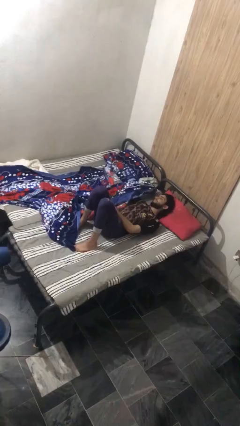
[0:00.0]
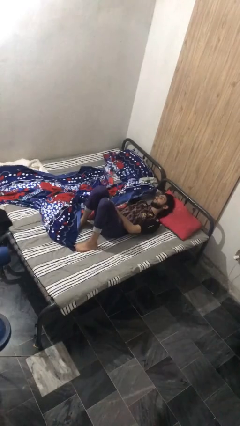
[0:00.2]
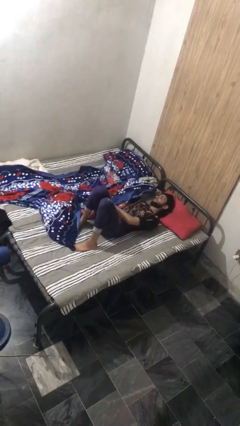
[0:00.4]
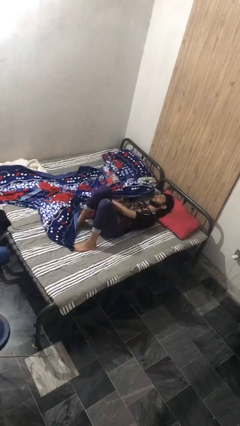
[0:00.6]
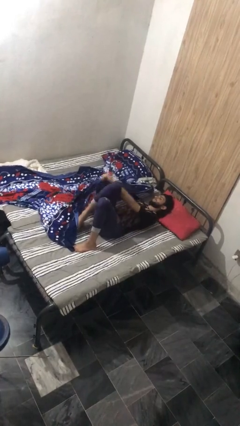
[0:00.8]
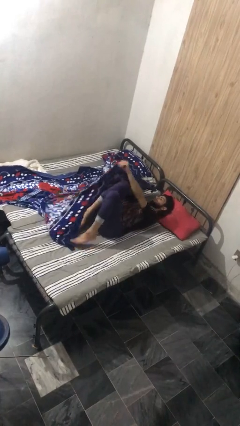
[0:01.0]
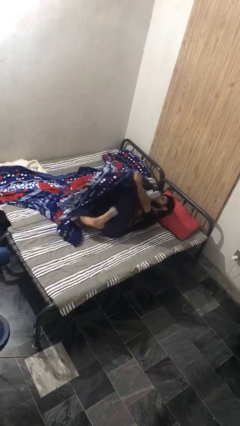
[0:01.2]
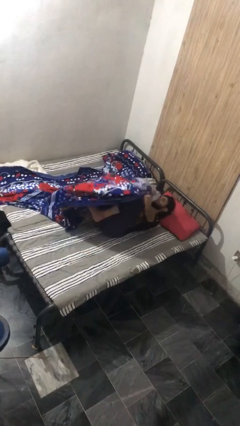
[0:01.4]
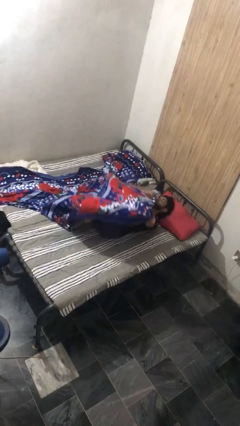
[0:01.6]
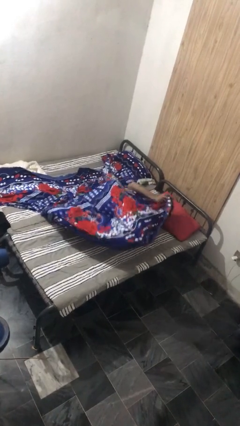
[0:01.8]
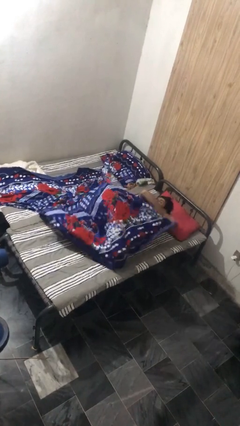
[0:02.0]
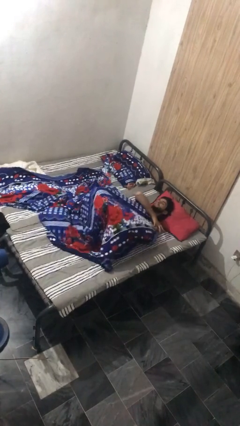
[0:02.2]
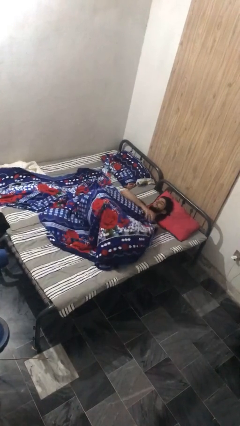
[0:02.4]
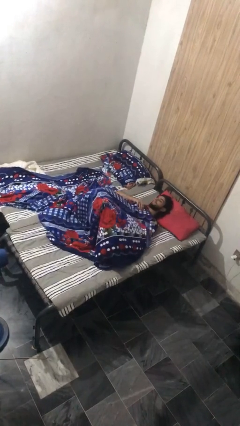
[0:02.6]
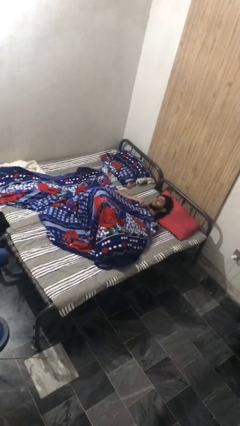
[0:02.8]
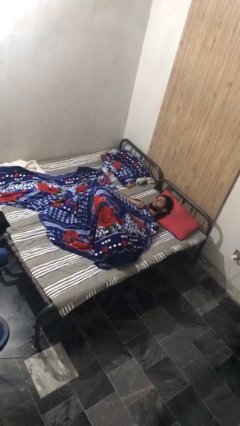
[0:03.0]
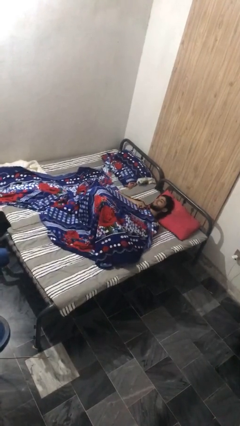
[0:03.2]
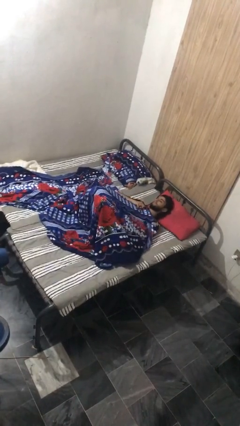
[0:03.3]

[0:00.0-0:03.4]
person covers with bedsheets

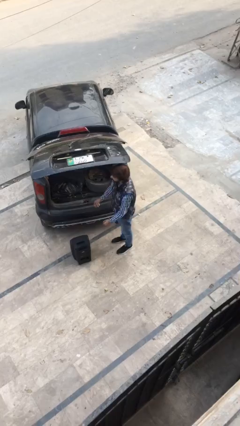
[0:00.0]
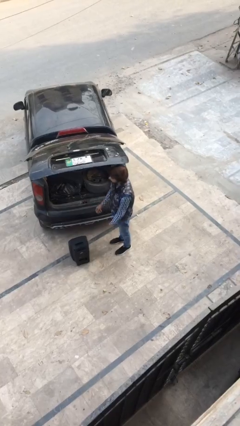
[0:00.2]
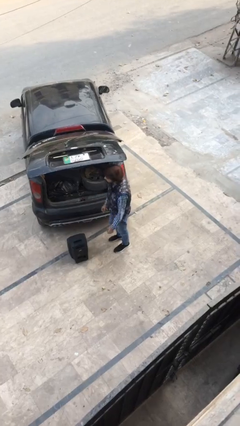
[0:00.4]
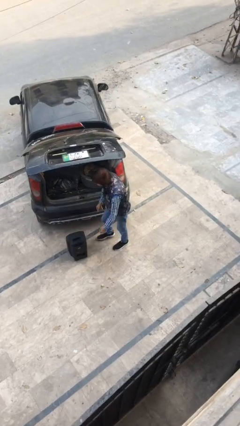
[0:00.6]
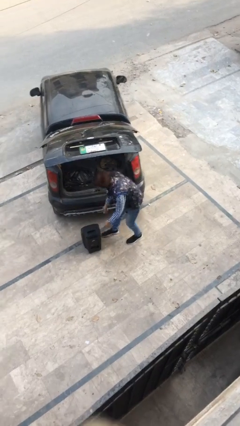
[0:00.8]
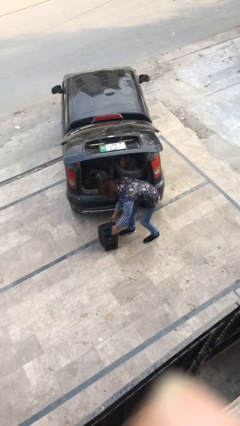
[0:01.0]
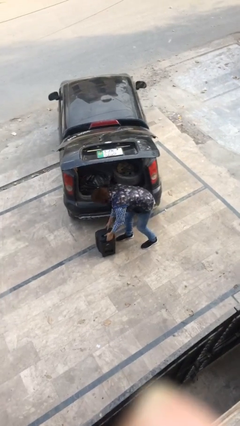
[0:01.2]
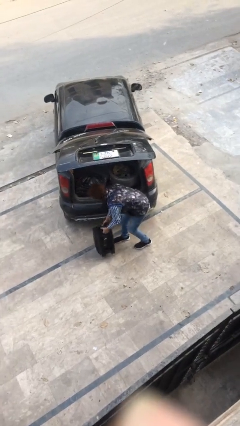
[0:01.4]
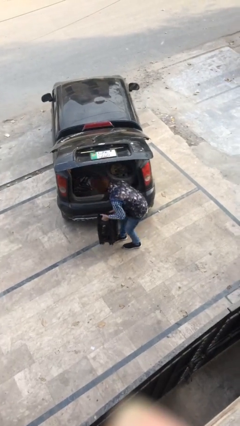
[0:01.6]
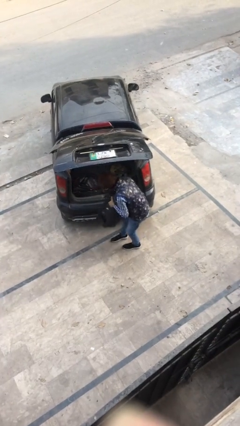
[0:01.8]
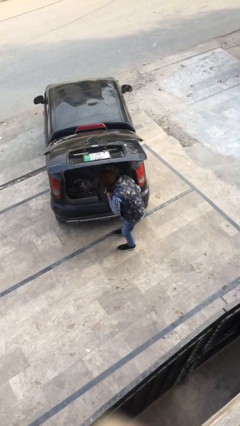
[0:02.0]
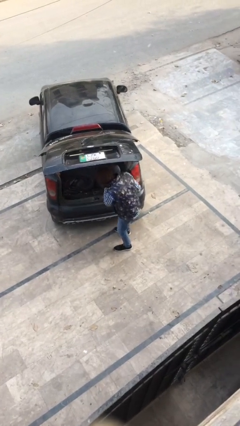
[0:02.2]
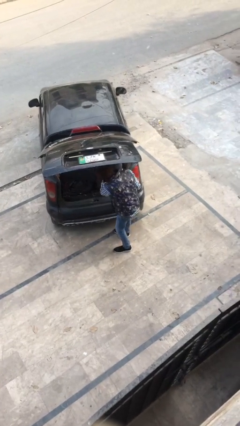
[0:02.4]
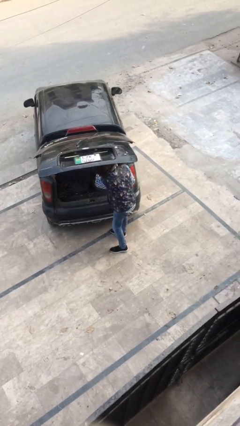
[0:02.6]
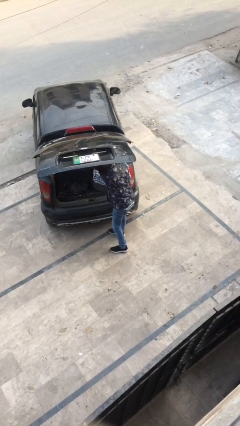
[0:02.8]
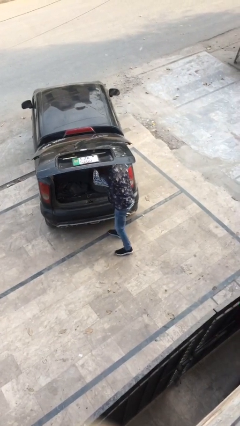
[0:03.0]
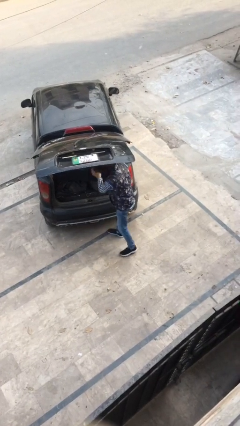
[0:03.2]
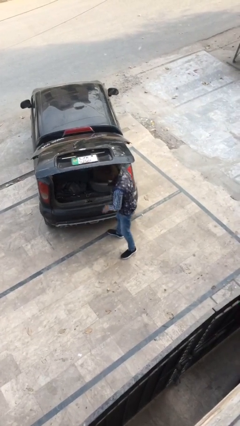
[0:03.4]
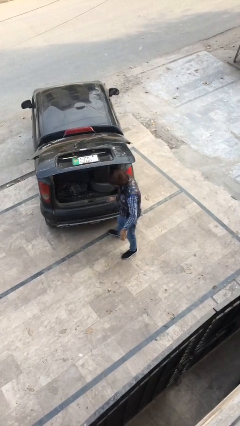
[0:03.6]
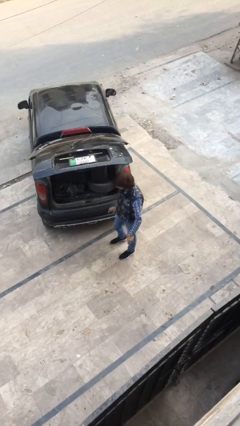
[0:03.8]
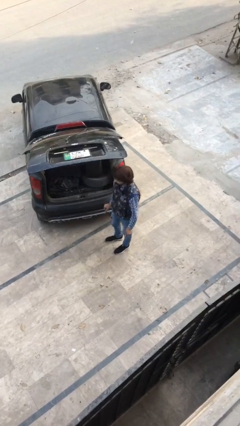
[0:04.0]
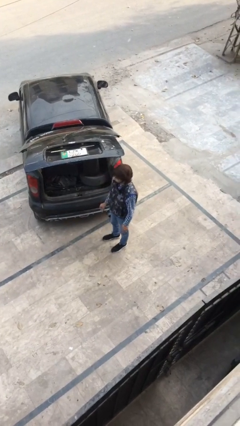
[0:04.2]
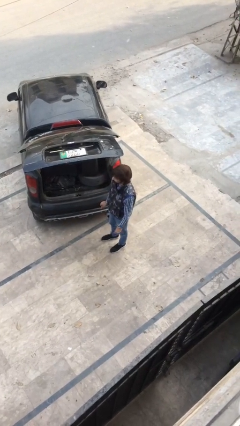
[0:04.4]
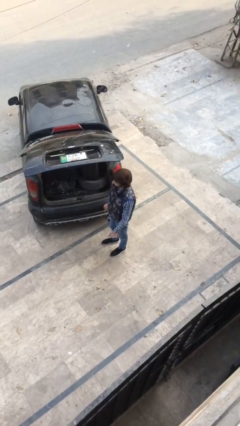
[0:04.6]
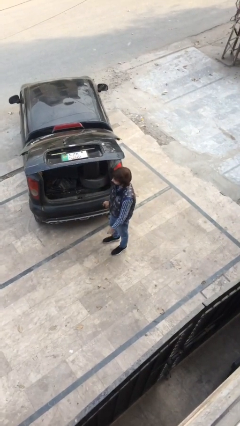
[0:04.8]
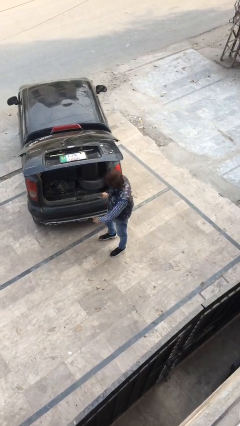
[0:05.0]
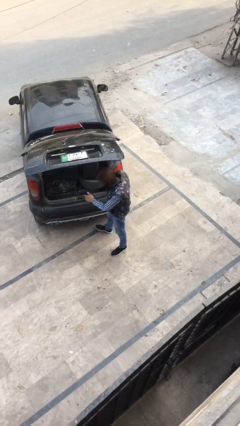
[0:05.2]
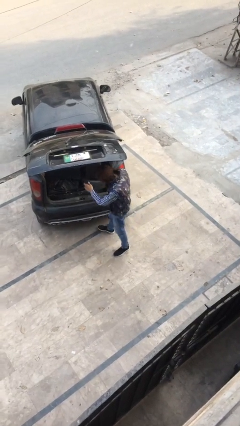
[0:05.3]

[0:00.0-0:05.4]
person loads car

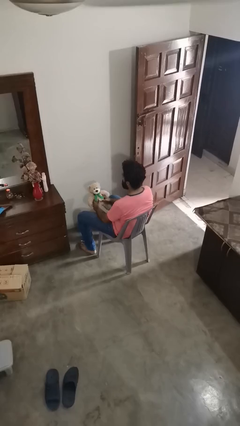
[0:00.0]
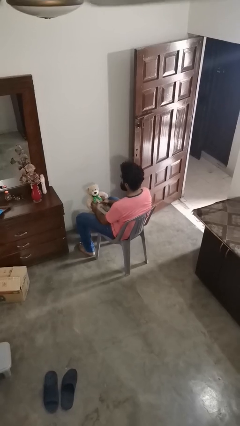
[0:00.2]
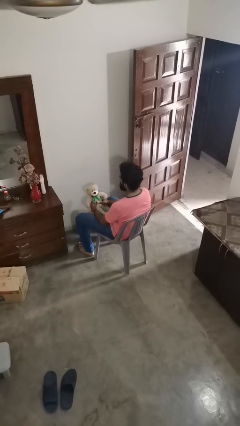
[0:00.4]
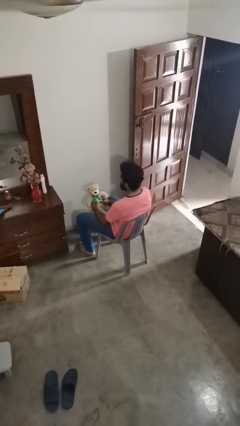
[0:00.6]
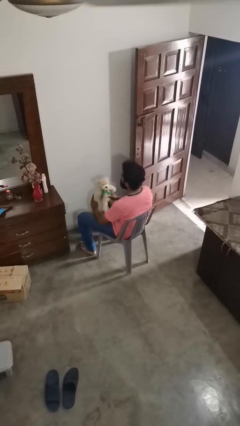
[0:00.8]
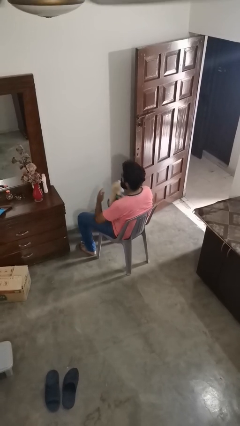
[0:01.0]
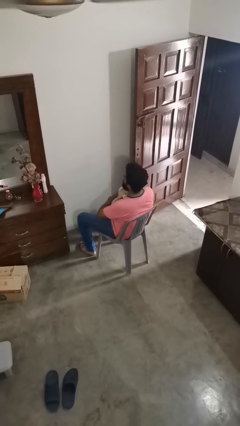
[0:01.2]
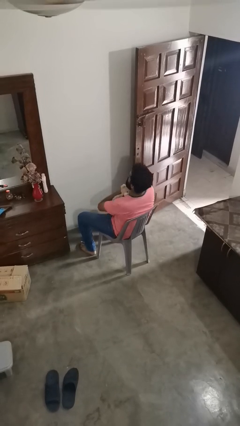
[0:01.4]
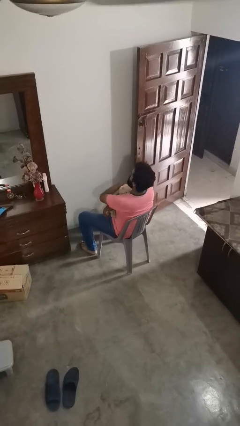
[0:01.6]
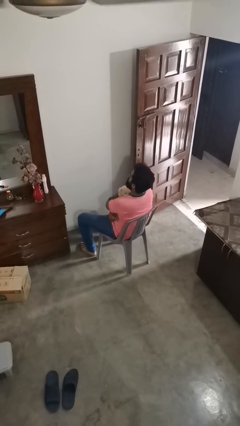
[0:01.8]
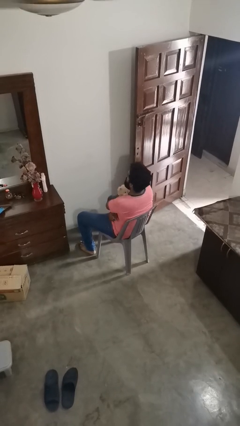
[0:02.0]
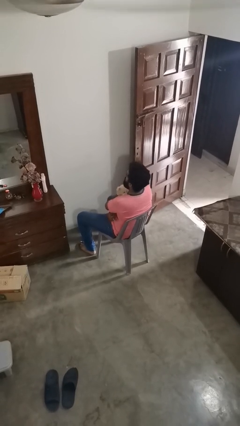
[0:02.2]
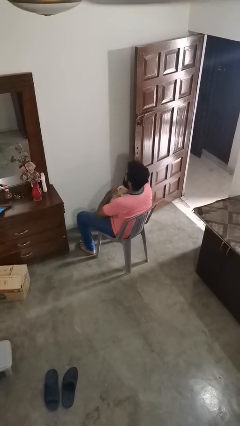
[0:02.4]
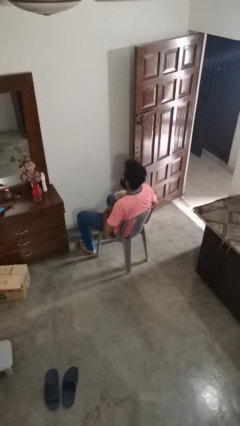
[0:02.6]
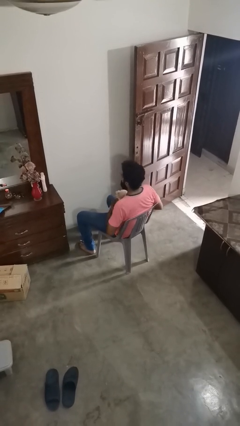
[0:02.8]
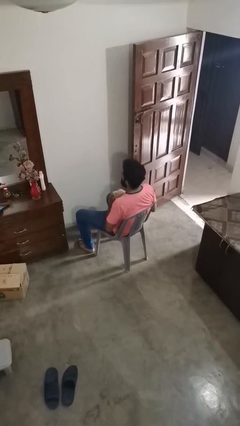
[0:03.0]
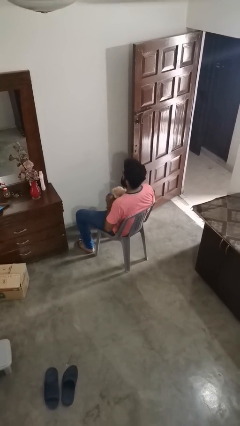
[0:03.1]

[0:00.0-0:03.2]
person hugs stuffed animal

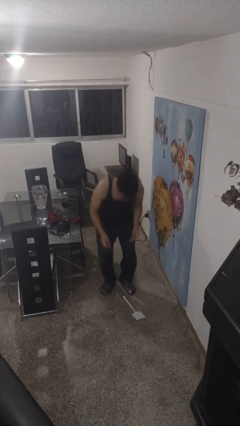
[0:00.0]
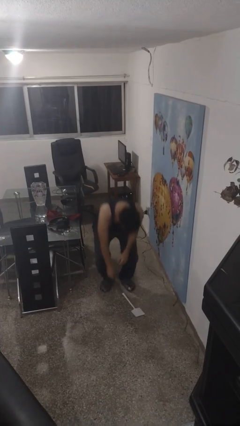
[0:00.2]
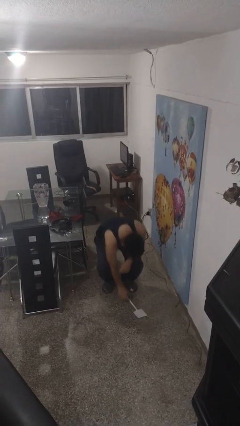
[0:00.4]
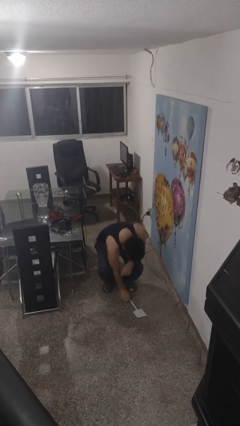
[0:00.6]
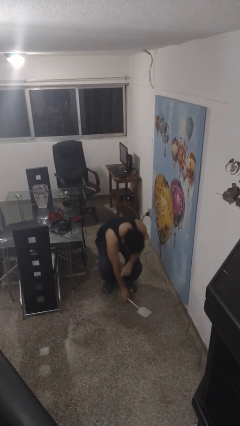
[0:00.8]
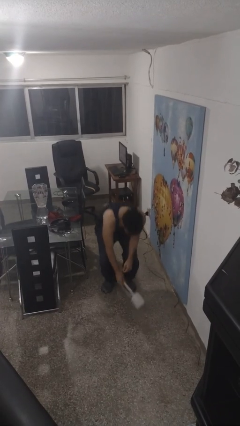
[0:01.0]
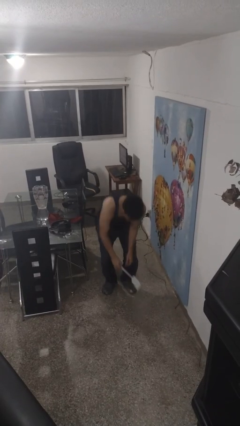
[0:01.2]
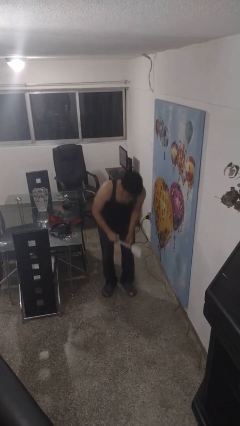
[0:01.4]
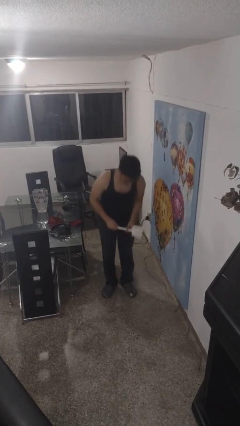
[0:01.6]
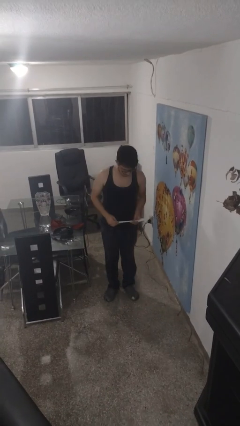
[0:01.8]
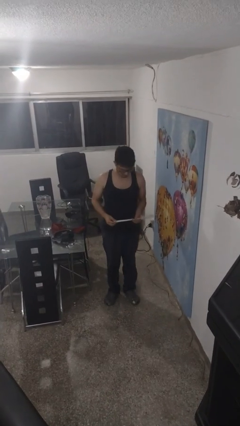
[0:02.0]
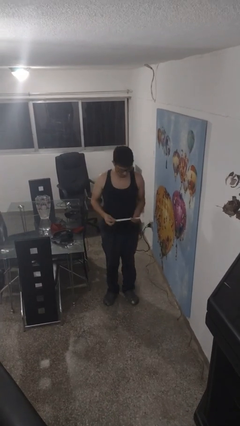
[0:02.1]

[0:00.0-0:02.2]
person picks up object from floor

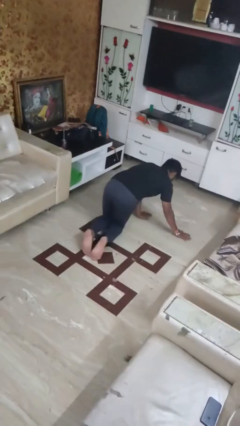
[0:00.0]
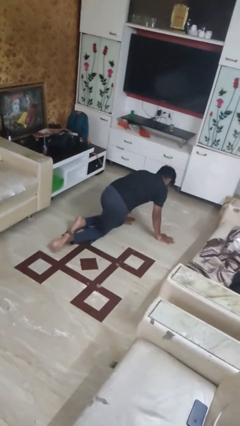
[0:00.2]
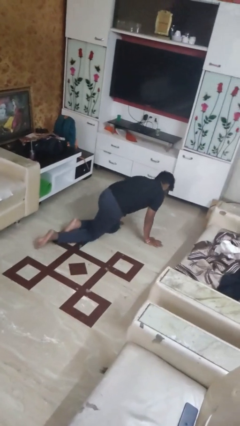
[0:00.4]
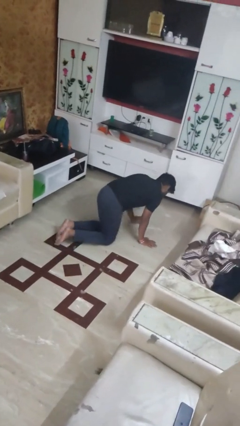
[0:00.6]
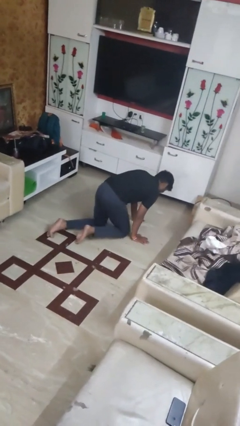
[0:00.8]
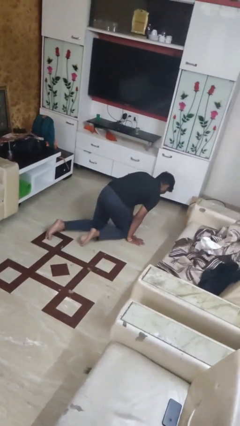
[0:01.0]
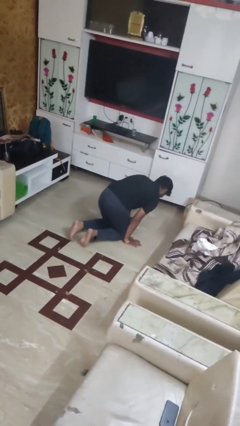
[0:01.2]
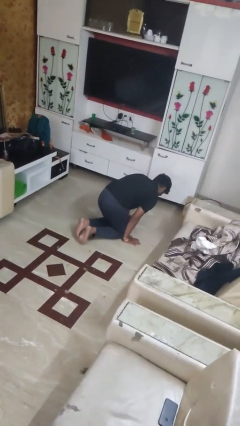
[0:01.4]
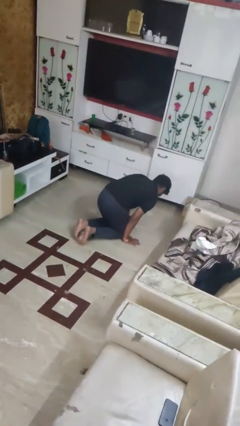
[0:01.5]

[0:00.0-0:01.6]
person crawls

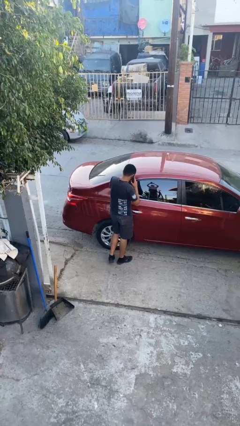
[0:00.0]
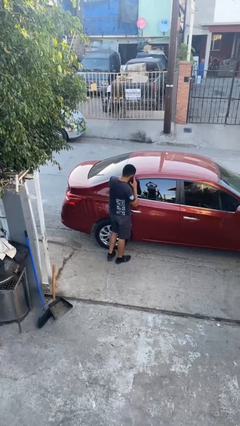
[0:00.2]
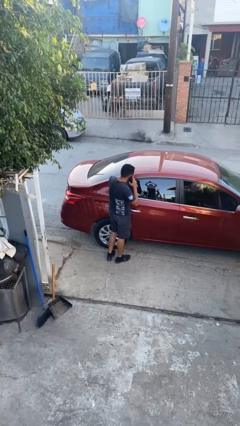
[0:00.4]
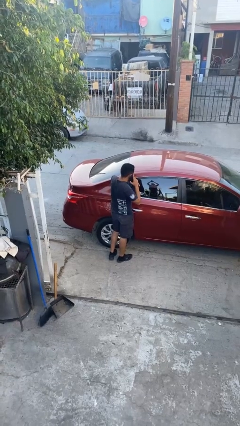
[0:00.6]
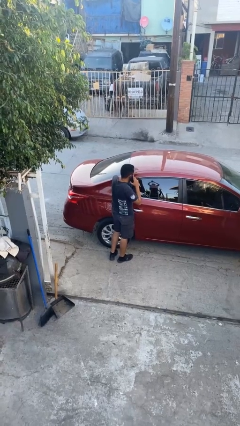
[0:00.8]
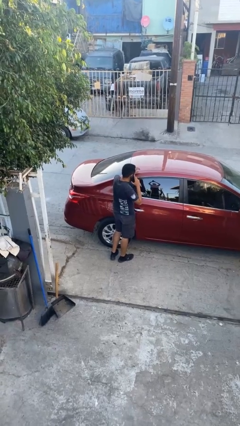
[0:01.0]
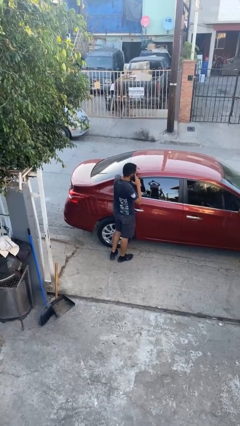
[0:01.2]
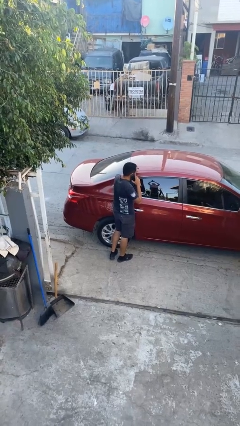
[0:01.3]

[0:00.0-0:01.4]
person leans against car
